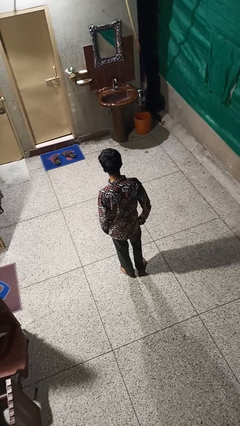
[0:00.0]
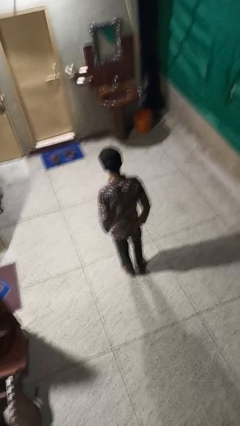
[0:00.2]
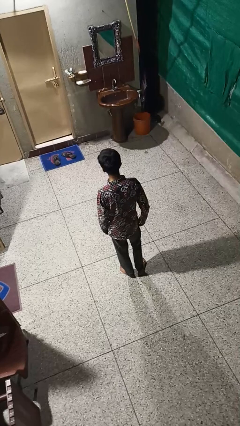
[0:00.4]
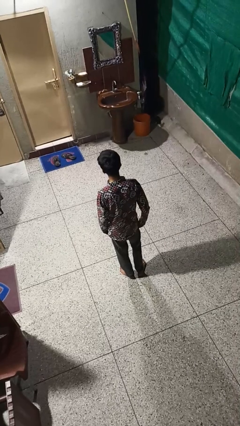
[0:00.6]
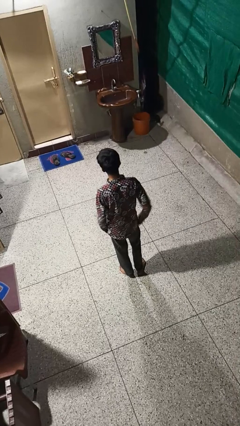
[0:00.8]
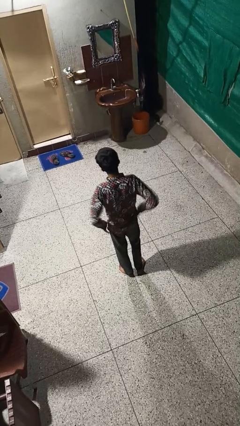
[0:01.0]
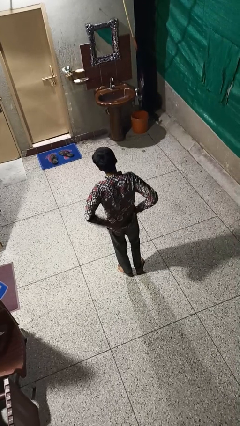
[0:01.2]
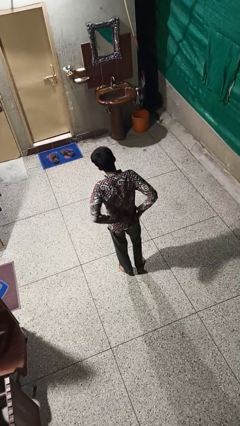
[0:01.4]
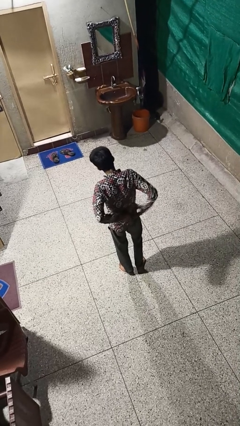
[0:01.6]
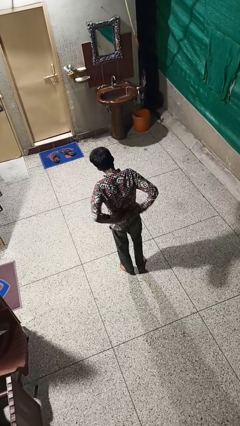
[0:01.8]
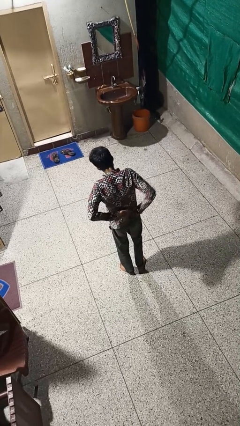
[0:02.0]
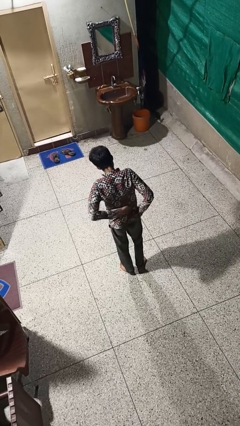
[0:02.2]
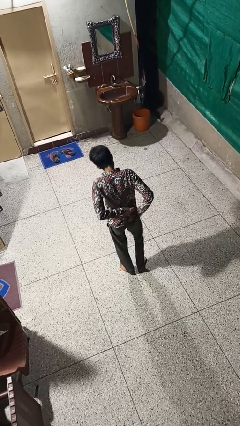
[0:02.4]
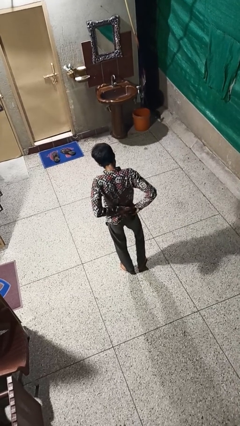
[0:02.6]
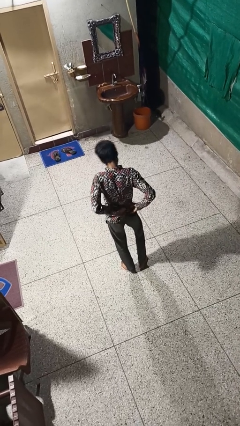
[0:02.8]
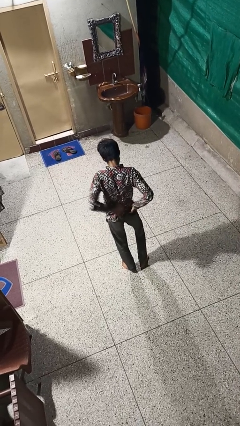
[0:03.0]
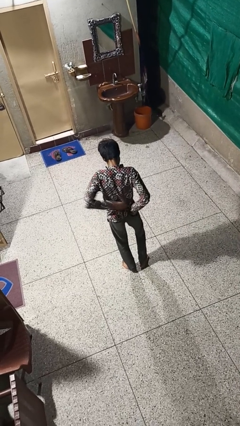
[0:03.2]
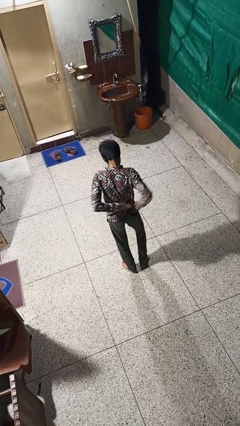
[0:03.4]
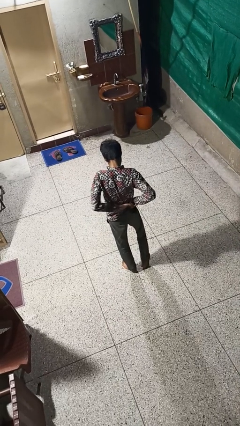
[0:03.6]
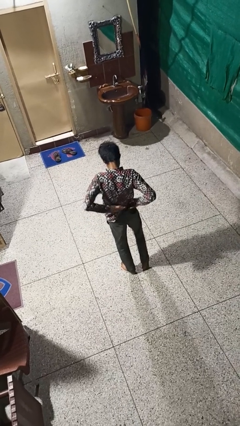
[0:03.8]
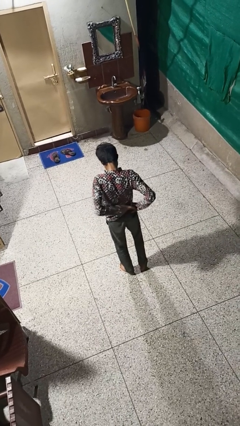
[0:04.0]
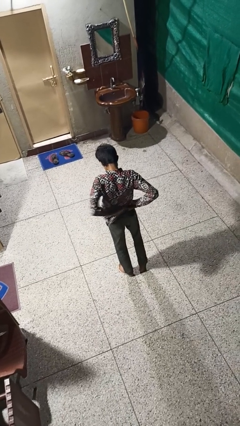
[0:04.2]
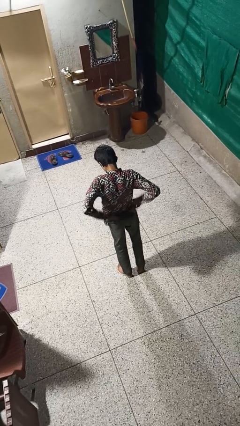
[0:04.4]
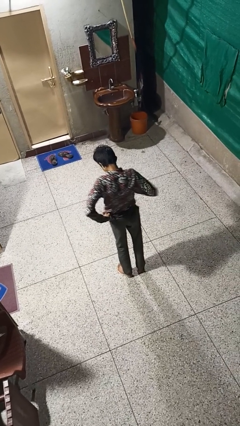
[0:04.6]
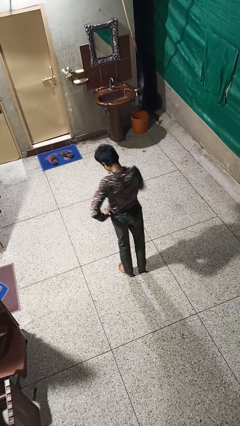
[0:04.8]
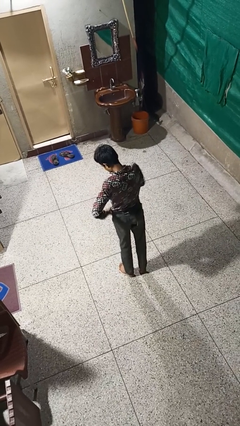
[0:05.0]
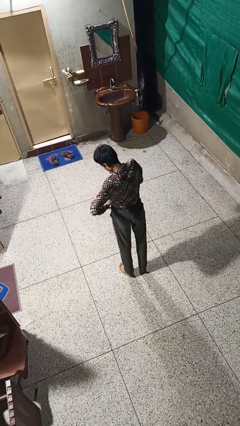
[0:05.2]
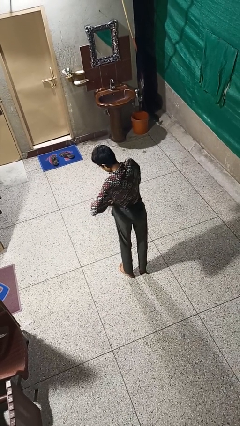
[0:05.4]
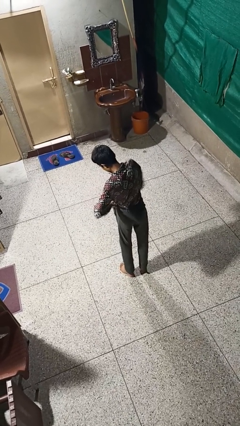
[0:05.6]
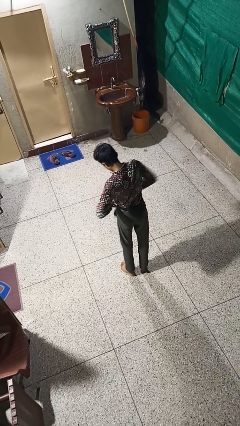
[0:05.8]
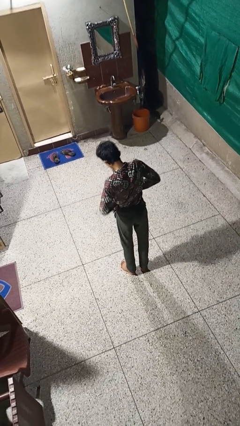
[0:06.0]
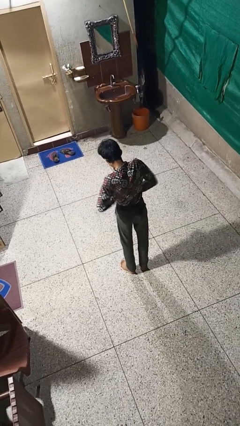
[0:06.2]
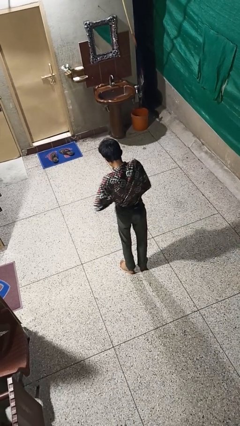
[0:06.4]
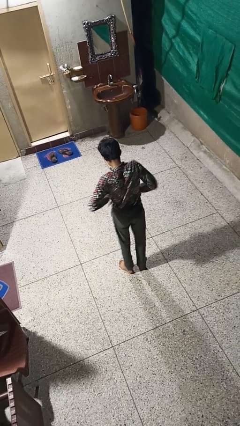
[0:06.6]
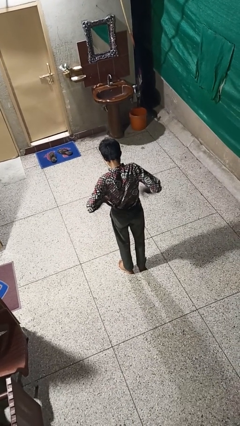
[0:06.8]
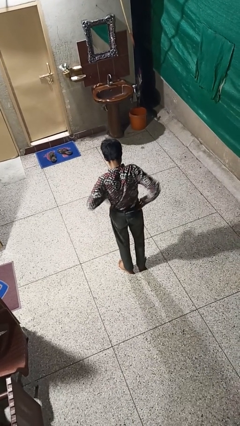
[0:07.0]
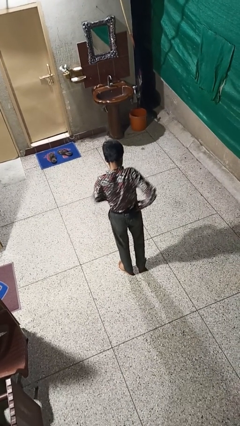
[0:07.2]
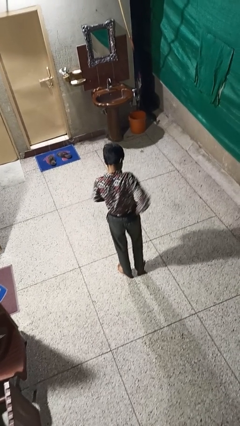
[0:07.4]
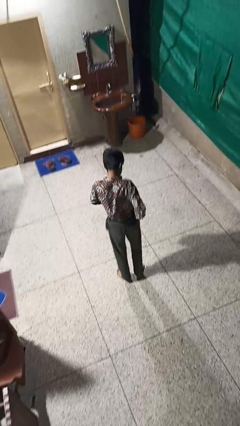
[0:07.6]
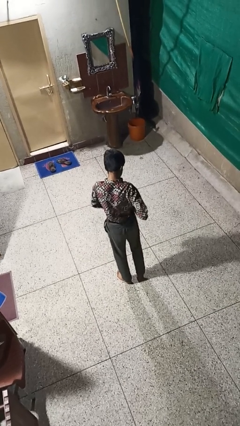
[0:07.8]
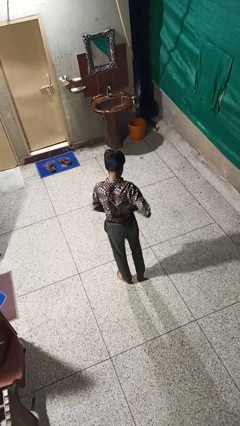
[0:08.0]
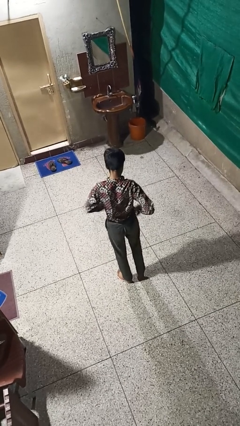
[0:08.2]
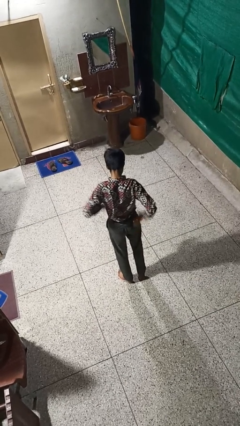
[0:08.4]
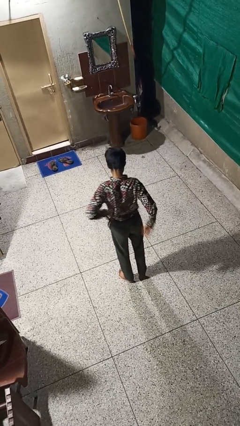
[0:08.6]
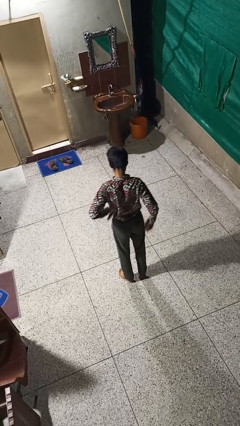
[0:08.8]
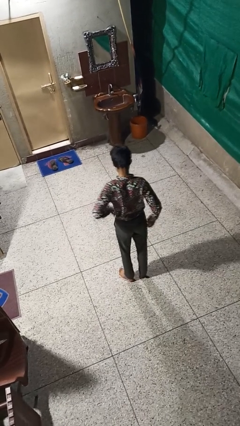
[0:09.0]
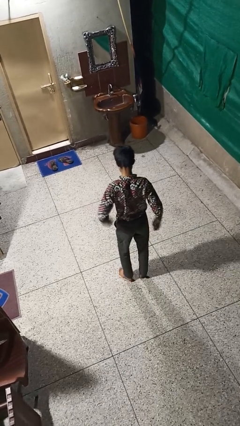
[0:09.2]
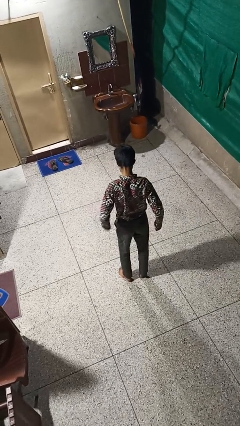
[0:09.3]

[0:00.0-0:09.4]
person tucks in shirt

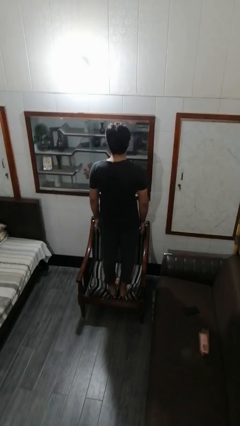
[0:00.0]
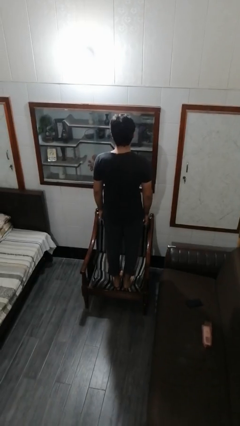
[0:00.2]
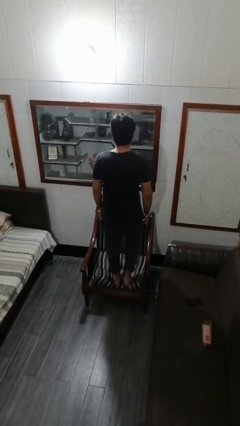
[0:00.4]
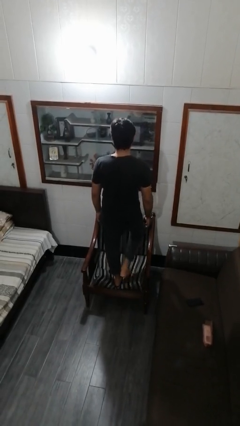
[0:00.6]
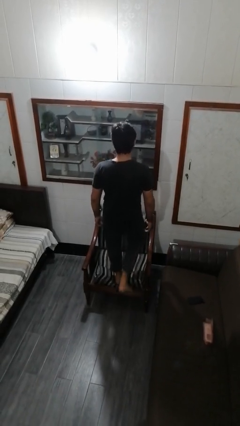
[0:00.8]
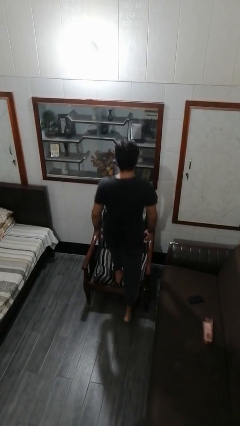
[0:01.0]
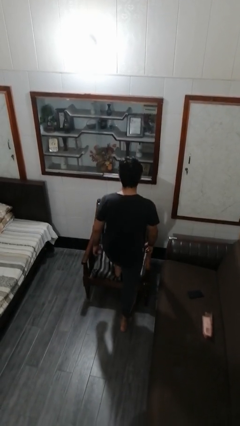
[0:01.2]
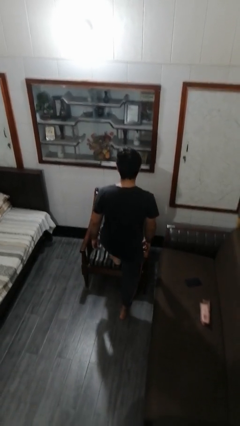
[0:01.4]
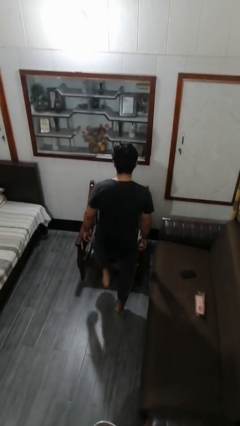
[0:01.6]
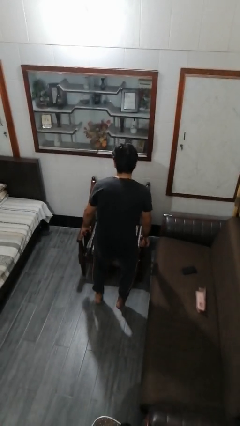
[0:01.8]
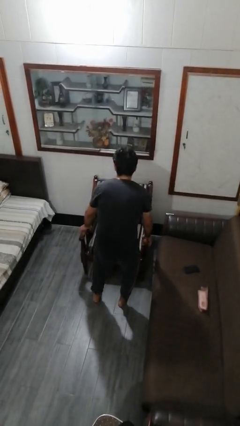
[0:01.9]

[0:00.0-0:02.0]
person climbs off chair

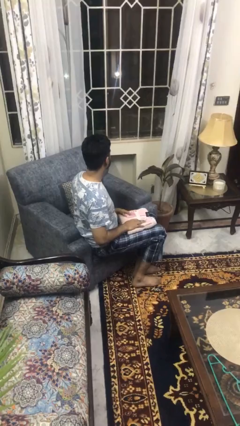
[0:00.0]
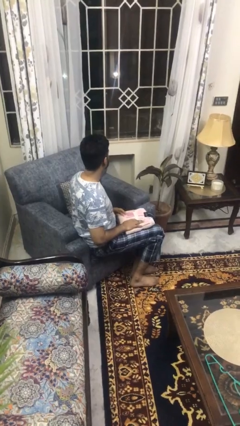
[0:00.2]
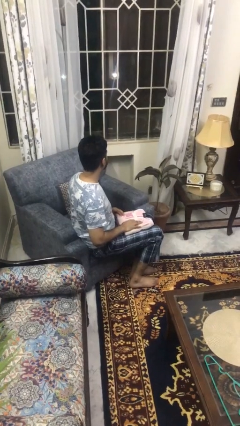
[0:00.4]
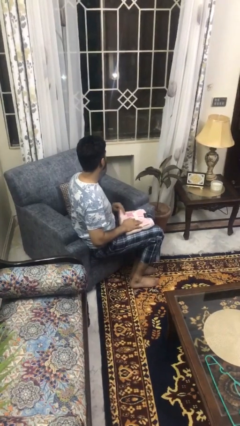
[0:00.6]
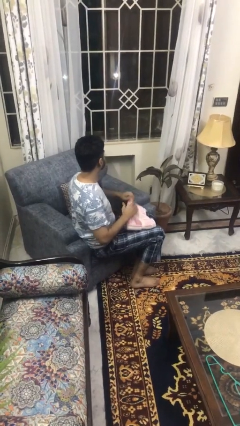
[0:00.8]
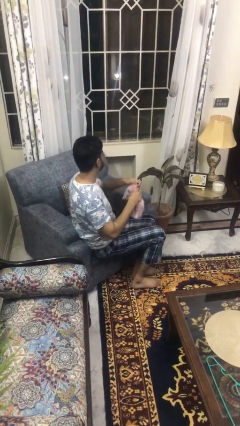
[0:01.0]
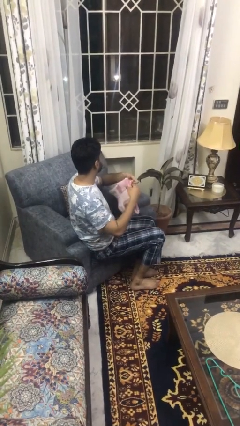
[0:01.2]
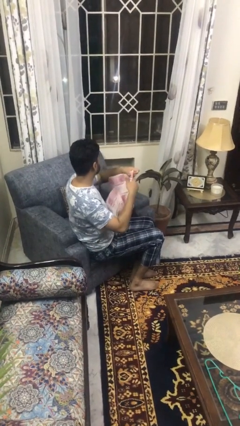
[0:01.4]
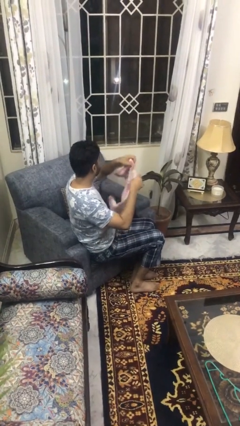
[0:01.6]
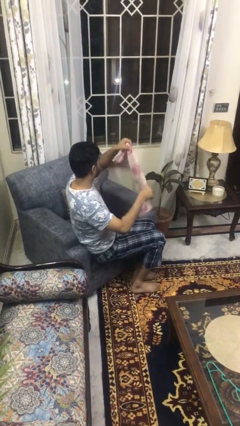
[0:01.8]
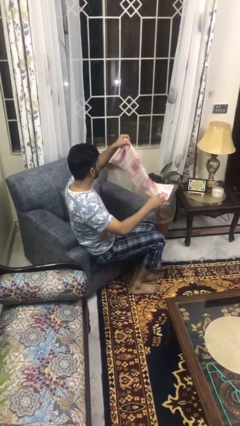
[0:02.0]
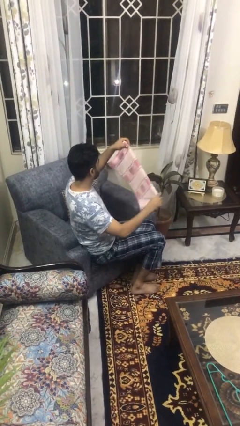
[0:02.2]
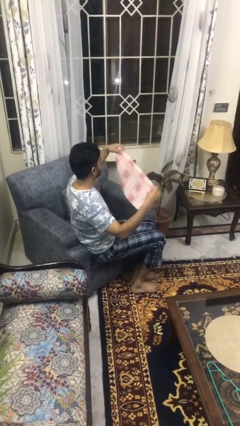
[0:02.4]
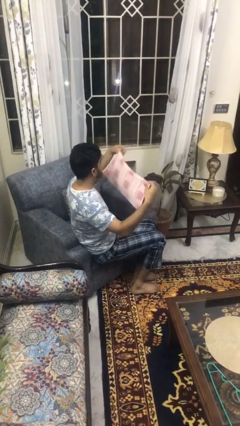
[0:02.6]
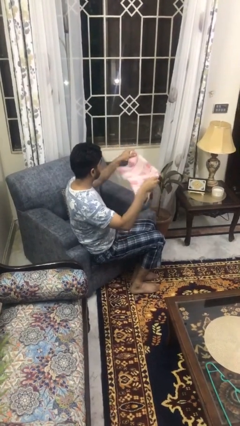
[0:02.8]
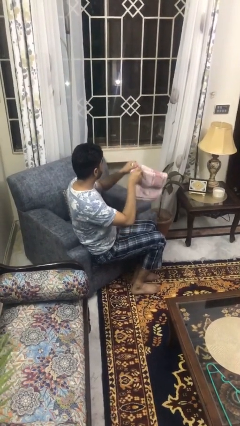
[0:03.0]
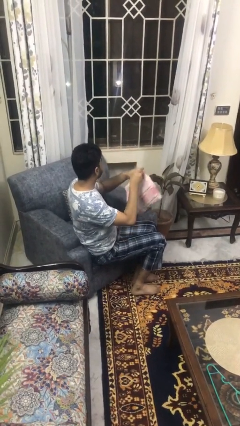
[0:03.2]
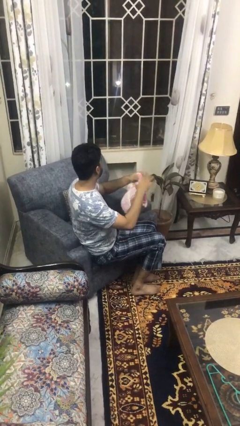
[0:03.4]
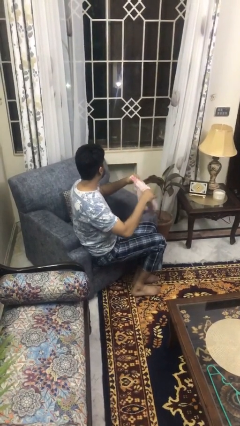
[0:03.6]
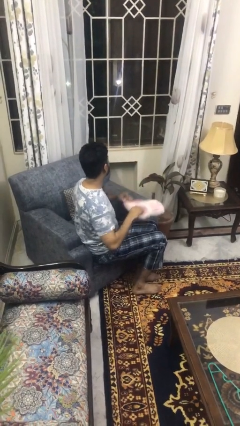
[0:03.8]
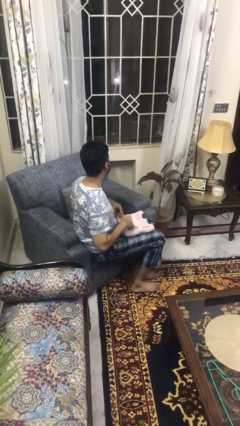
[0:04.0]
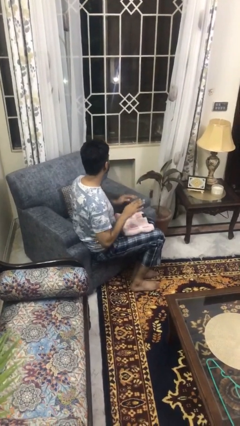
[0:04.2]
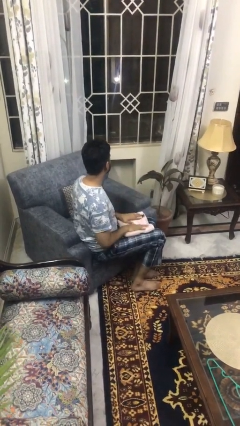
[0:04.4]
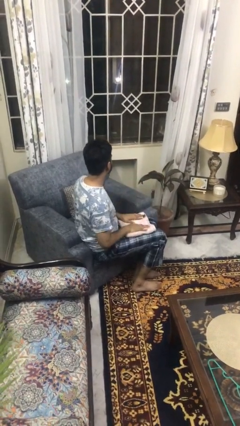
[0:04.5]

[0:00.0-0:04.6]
person folds towel

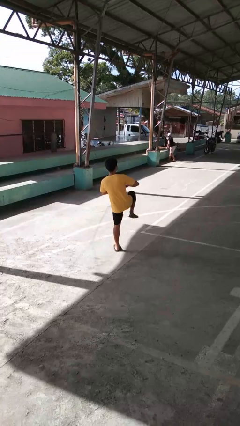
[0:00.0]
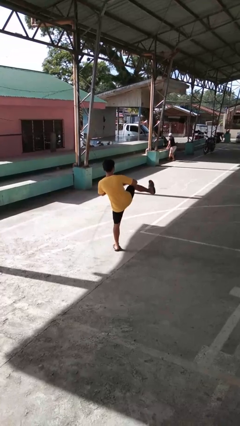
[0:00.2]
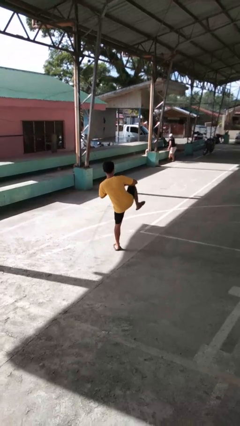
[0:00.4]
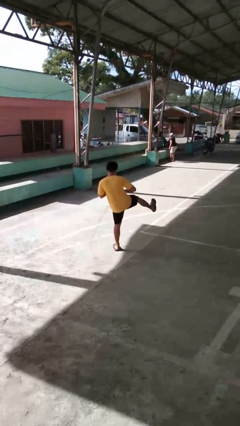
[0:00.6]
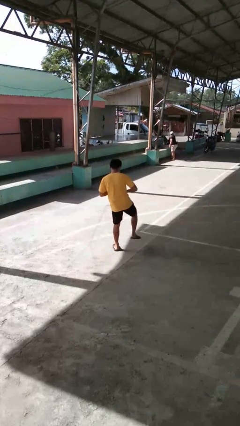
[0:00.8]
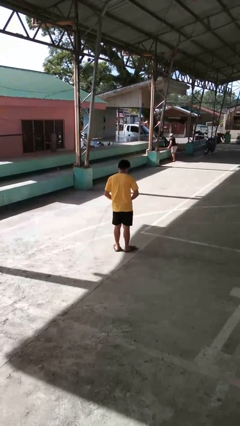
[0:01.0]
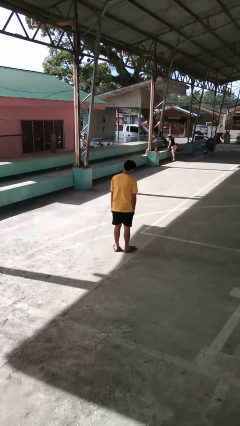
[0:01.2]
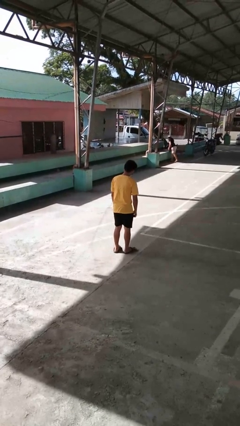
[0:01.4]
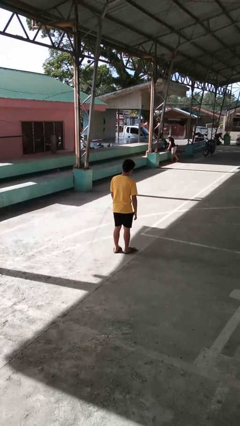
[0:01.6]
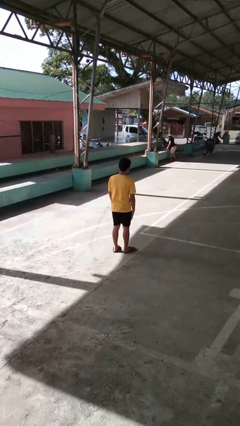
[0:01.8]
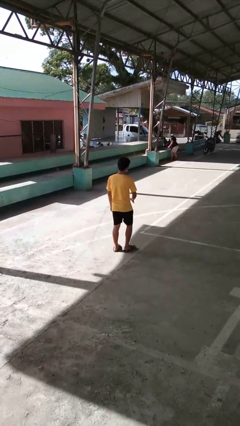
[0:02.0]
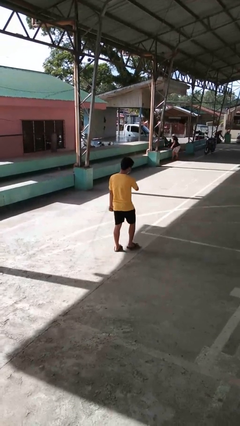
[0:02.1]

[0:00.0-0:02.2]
person karate kicks
